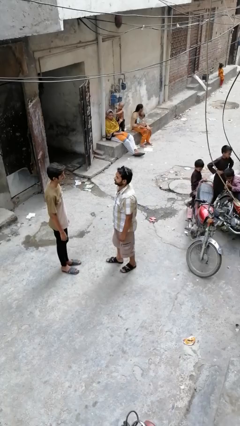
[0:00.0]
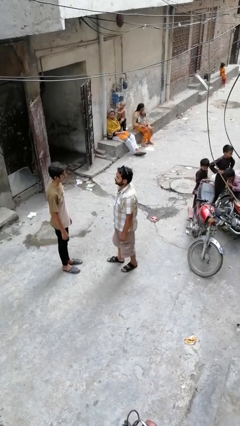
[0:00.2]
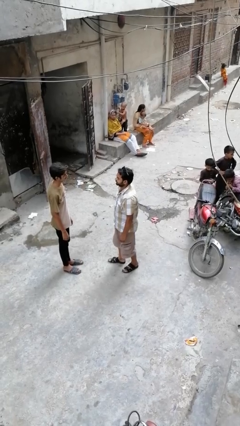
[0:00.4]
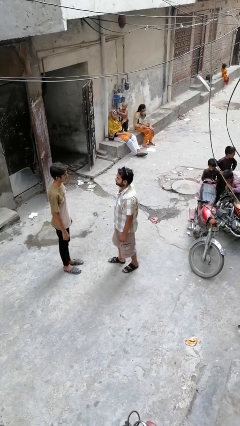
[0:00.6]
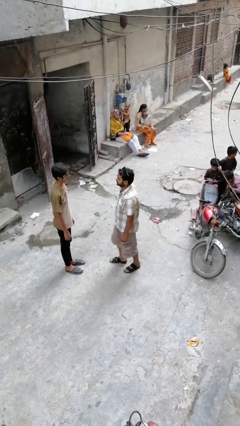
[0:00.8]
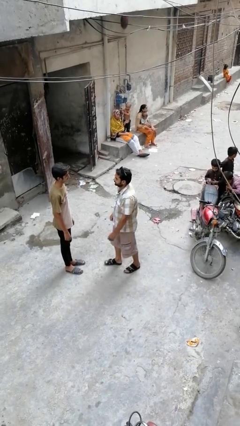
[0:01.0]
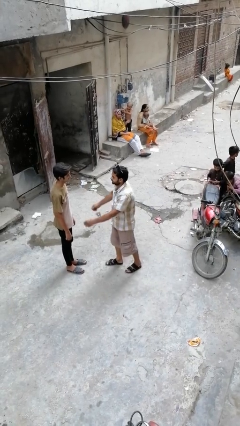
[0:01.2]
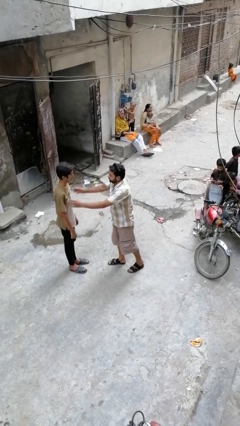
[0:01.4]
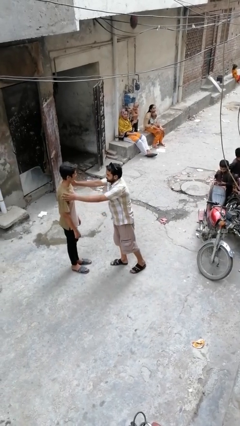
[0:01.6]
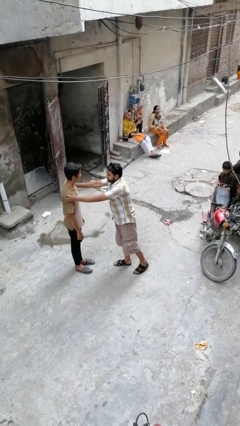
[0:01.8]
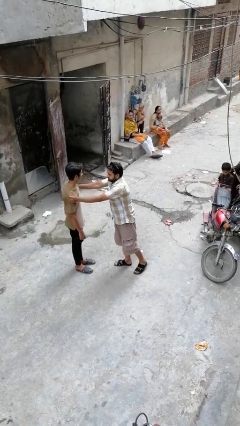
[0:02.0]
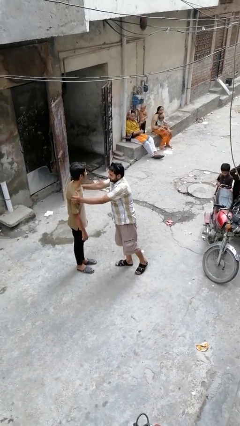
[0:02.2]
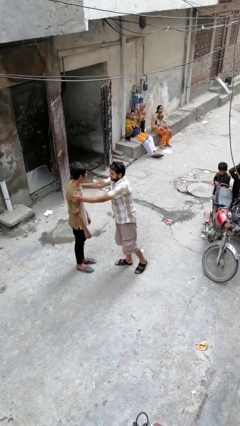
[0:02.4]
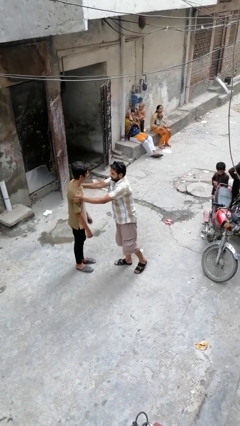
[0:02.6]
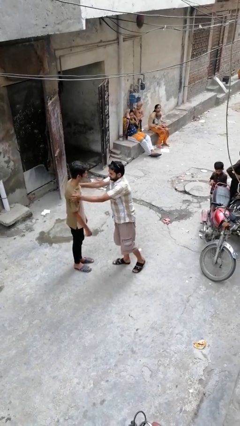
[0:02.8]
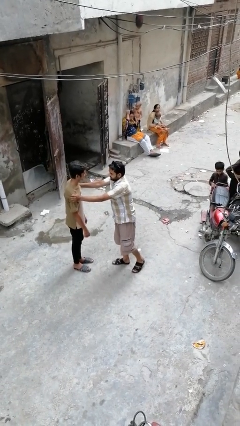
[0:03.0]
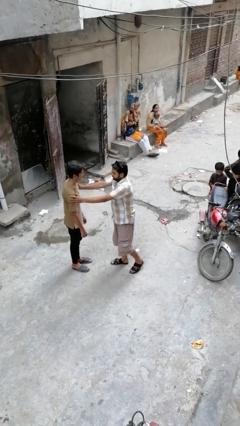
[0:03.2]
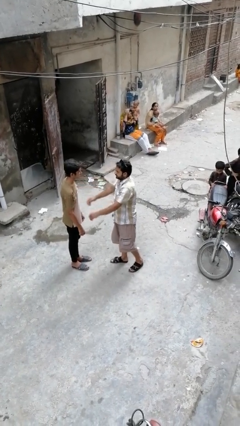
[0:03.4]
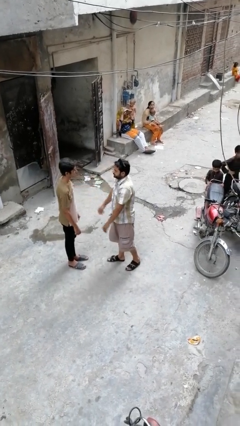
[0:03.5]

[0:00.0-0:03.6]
person pounds shoulders of person

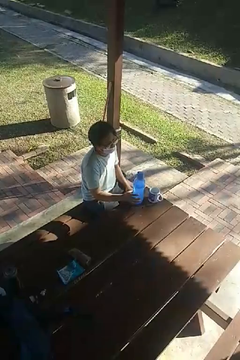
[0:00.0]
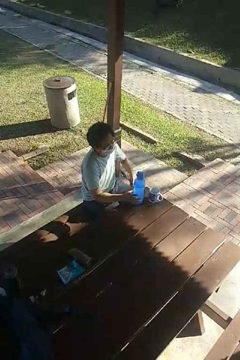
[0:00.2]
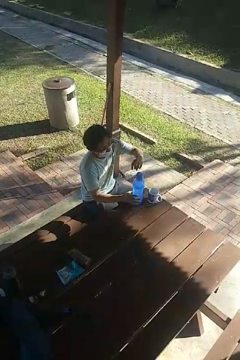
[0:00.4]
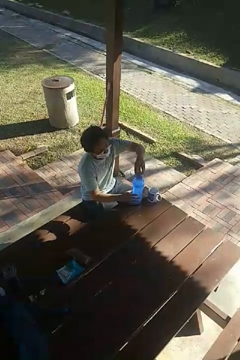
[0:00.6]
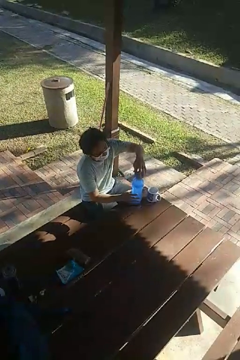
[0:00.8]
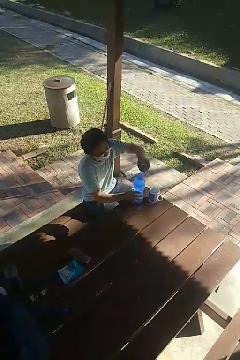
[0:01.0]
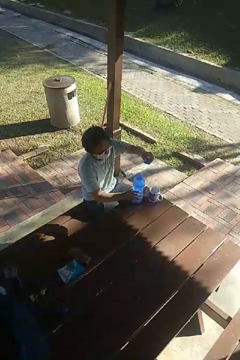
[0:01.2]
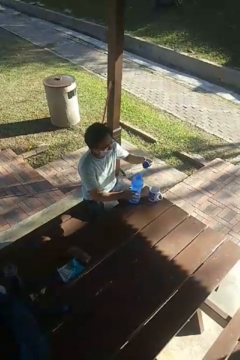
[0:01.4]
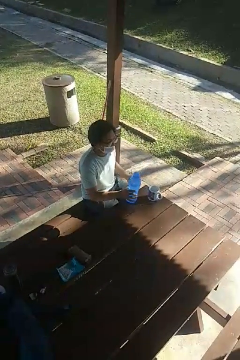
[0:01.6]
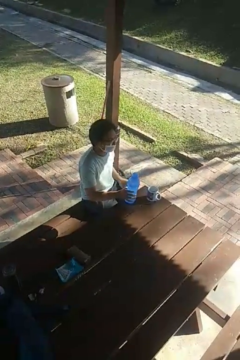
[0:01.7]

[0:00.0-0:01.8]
person unscrews lid from bottle

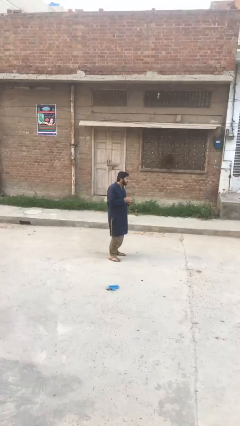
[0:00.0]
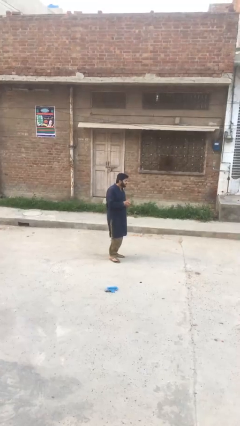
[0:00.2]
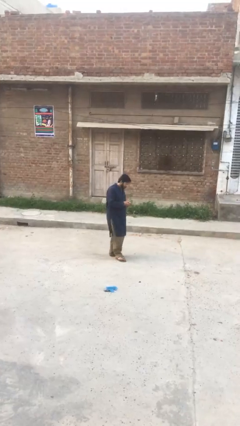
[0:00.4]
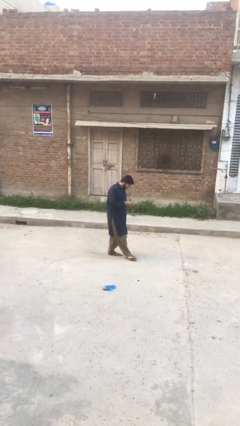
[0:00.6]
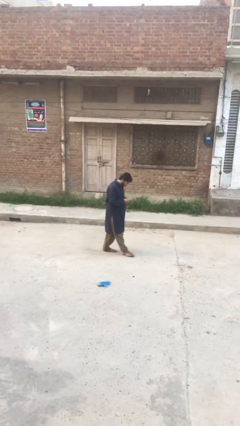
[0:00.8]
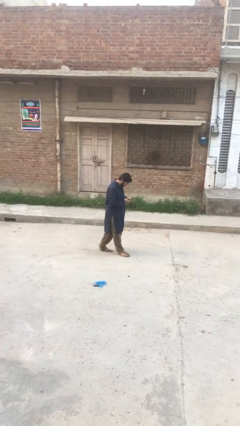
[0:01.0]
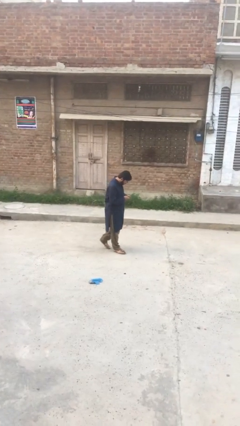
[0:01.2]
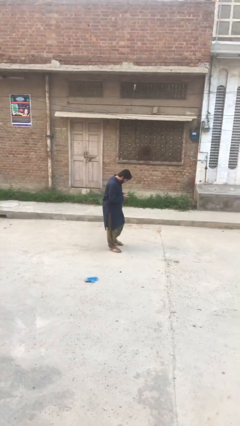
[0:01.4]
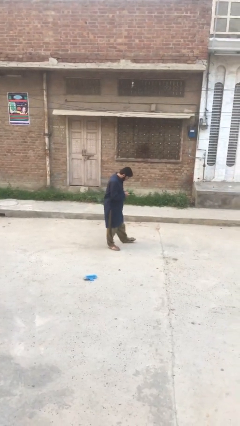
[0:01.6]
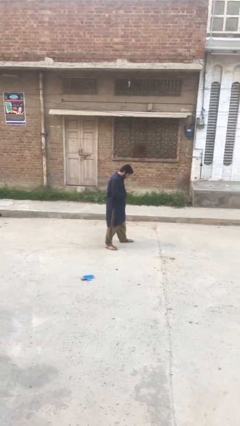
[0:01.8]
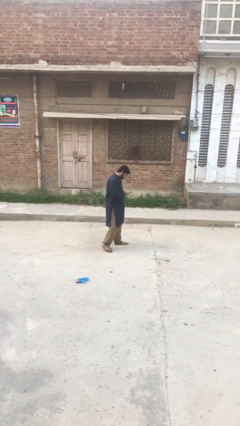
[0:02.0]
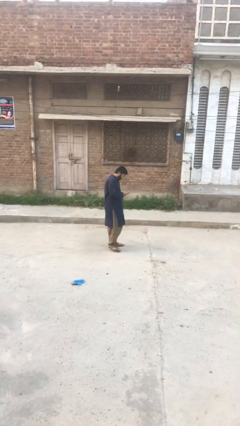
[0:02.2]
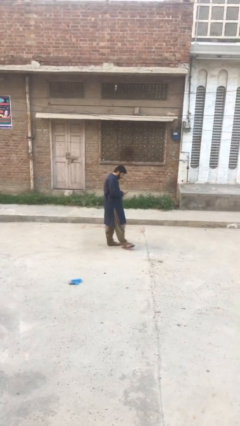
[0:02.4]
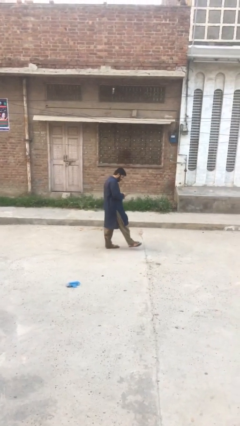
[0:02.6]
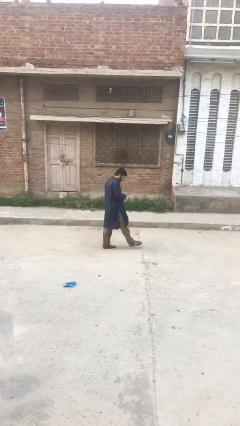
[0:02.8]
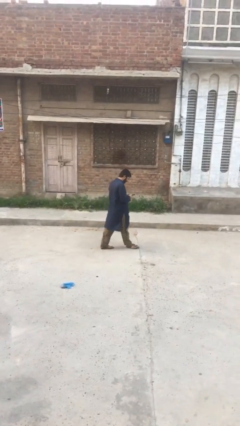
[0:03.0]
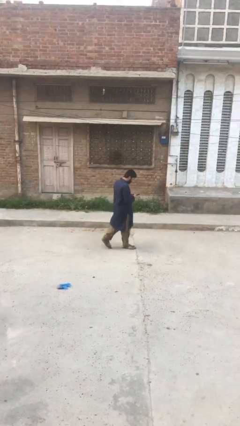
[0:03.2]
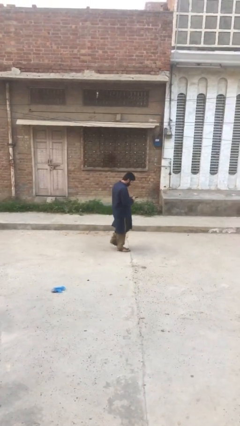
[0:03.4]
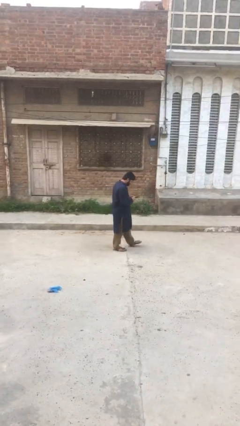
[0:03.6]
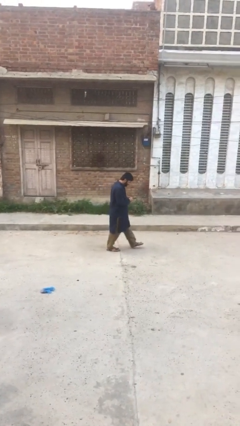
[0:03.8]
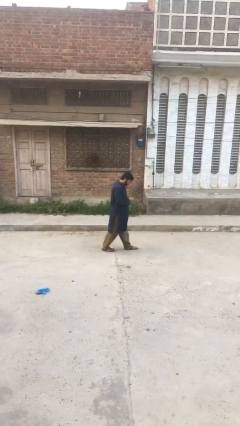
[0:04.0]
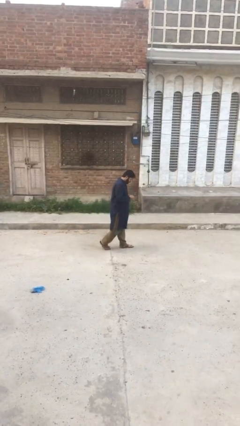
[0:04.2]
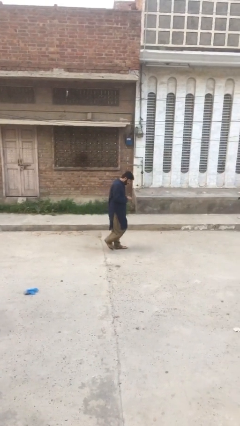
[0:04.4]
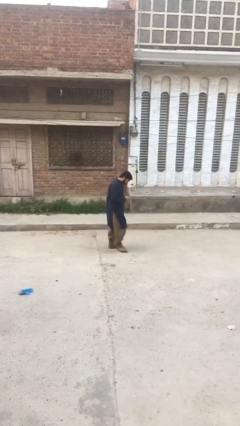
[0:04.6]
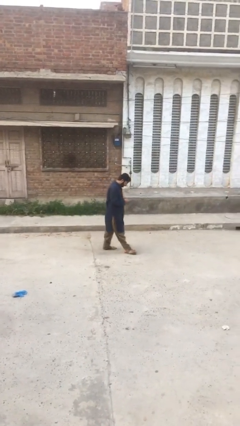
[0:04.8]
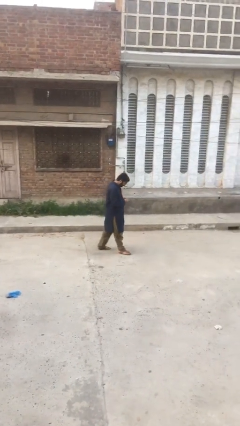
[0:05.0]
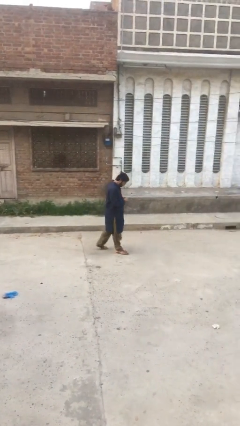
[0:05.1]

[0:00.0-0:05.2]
person texts on phone

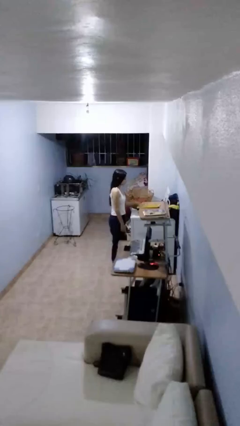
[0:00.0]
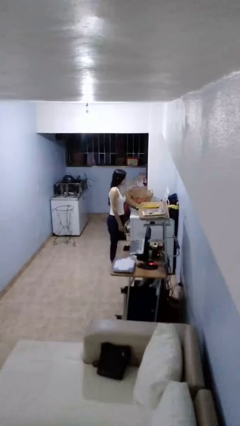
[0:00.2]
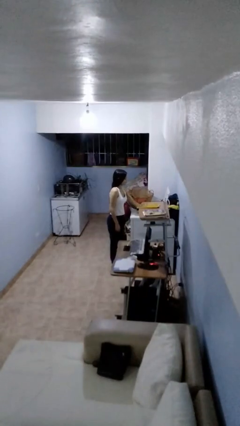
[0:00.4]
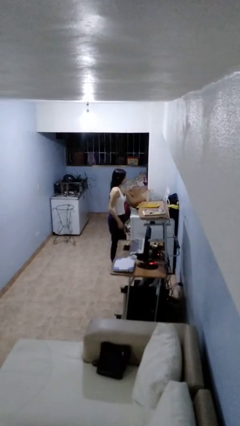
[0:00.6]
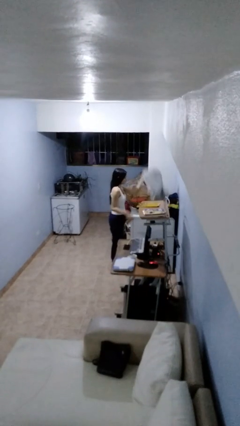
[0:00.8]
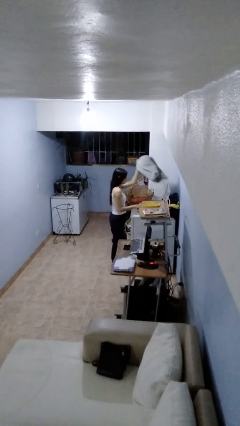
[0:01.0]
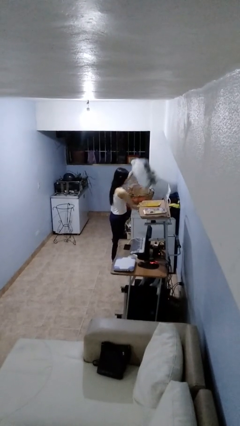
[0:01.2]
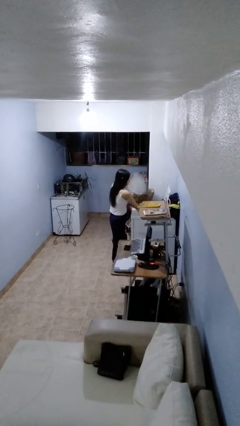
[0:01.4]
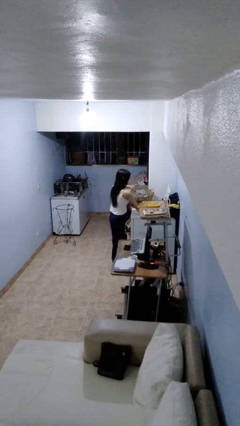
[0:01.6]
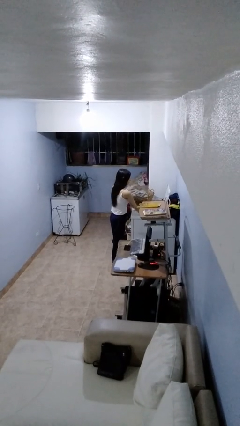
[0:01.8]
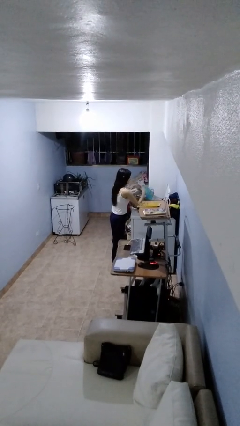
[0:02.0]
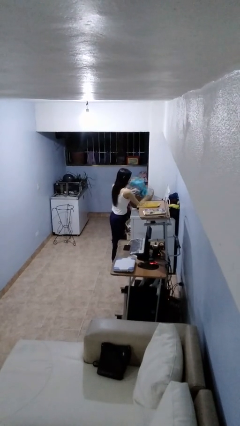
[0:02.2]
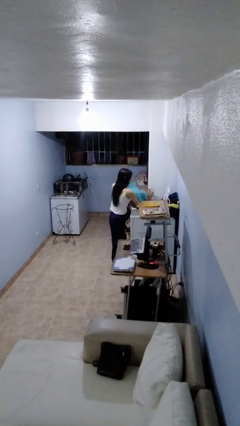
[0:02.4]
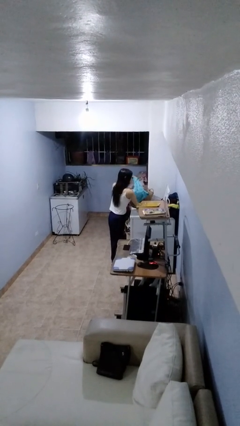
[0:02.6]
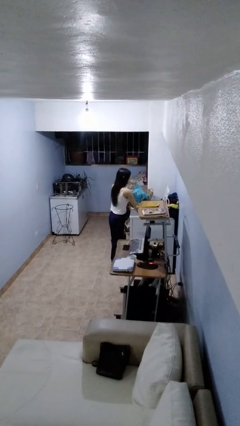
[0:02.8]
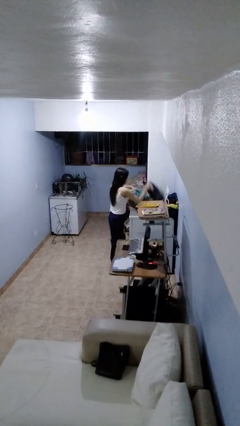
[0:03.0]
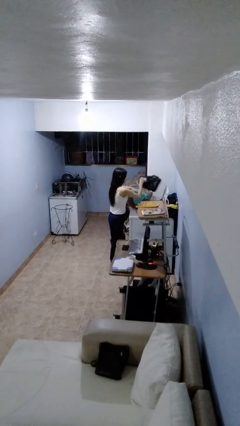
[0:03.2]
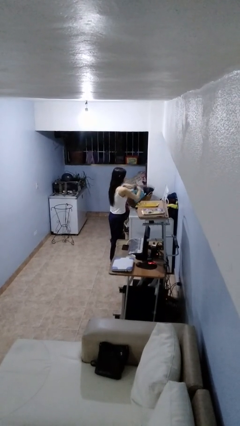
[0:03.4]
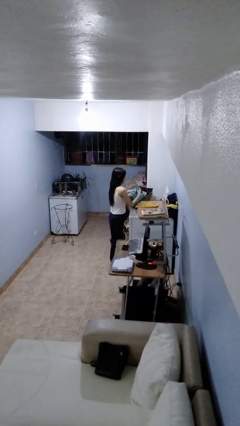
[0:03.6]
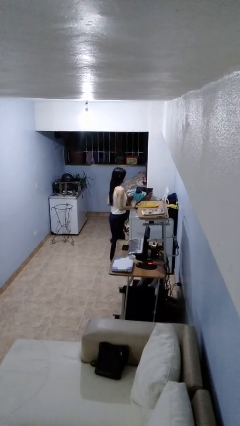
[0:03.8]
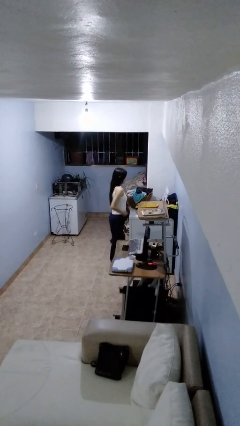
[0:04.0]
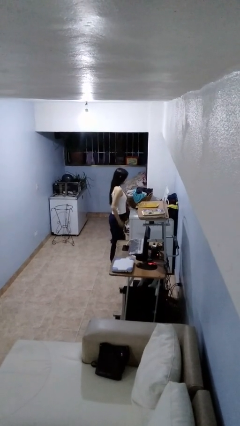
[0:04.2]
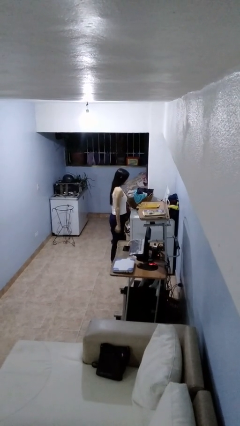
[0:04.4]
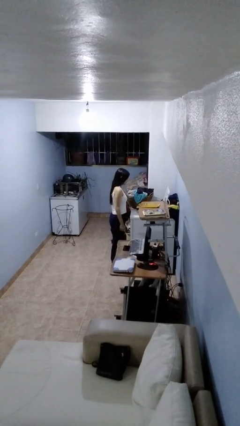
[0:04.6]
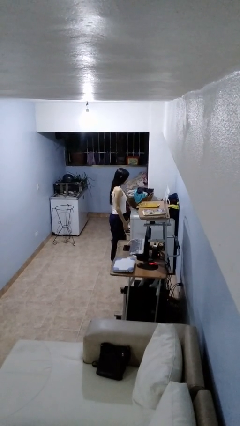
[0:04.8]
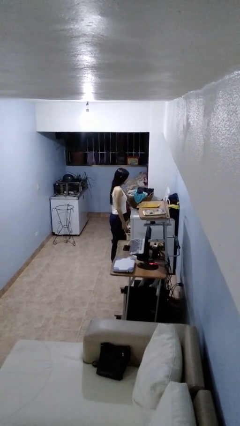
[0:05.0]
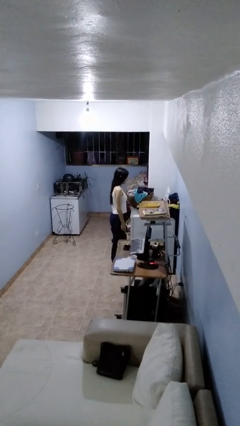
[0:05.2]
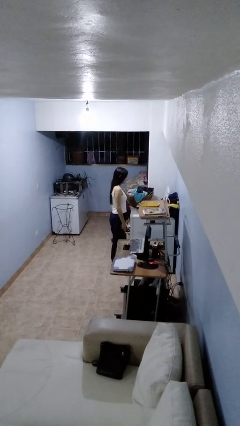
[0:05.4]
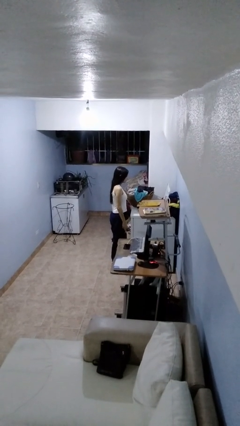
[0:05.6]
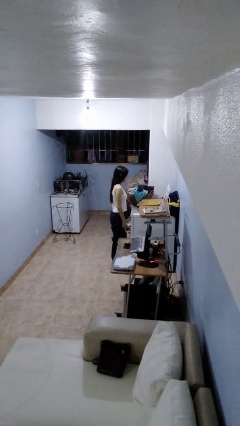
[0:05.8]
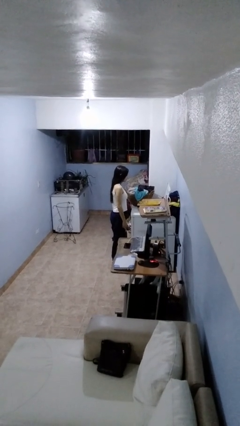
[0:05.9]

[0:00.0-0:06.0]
person unloads clotheswasher

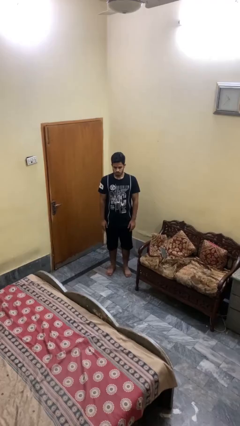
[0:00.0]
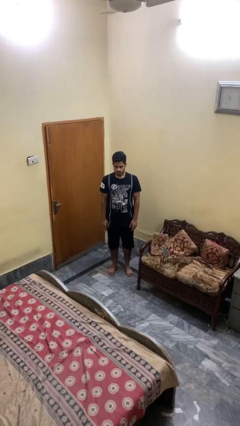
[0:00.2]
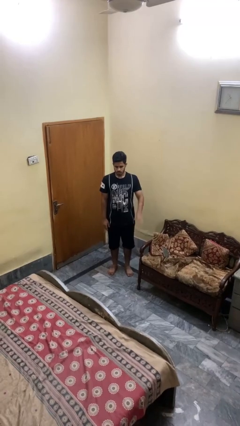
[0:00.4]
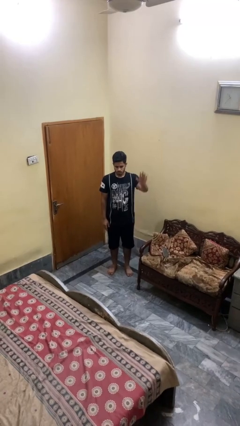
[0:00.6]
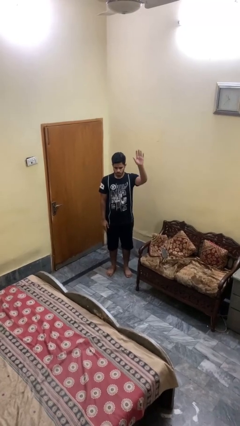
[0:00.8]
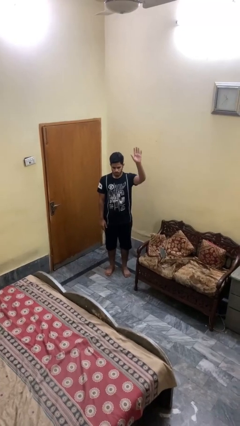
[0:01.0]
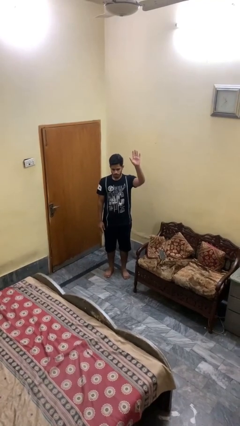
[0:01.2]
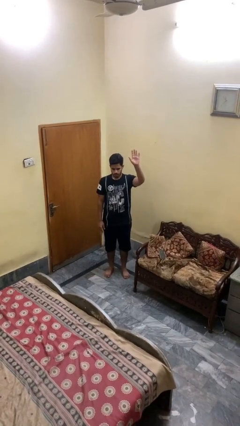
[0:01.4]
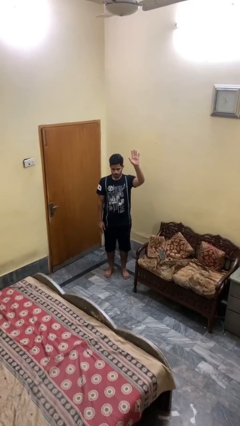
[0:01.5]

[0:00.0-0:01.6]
person gestures raise hand
